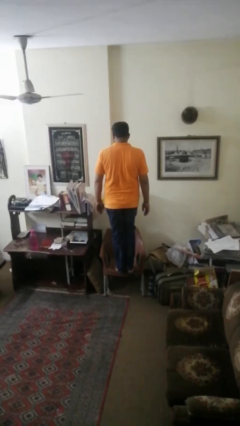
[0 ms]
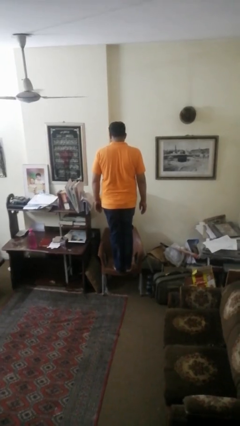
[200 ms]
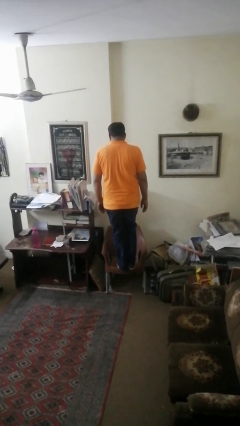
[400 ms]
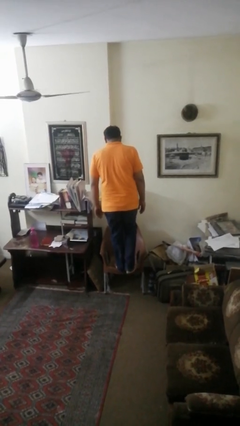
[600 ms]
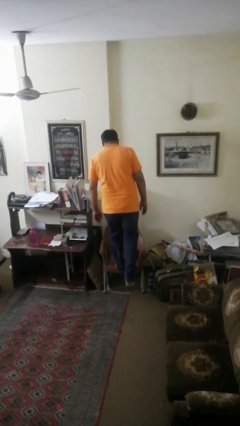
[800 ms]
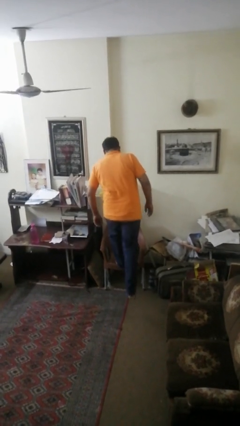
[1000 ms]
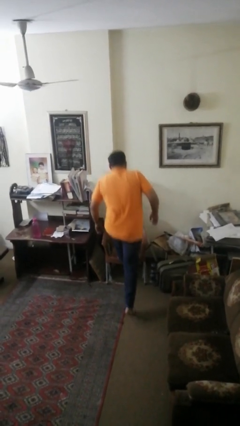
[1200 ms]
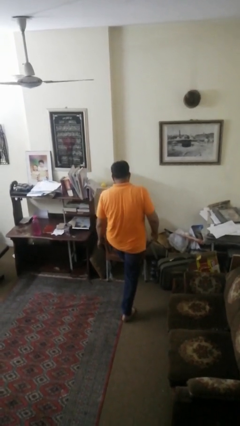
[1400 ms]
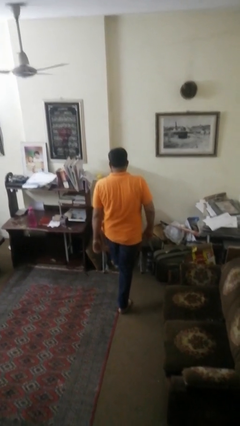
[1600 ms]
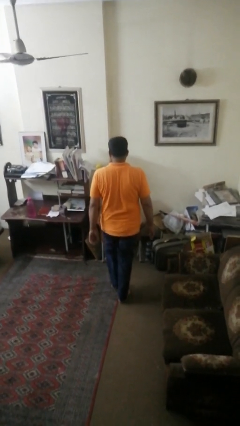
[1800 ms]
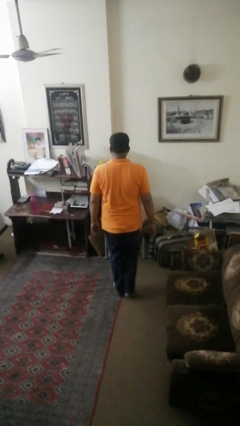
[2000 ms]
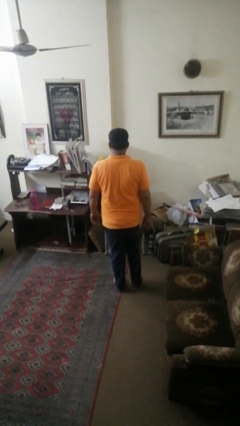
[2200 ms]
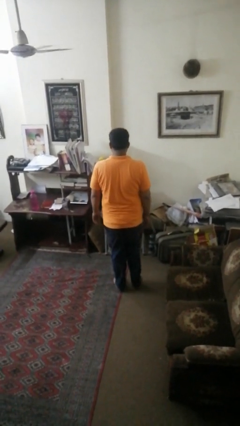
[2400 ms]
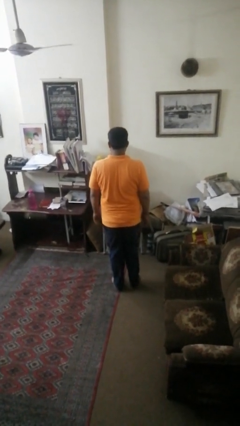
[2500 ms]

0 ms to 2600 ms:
person climbs off chair

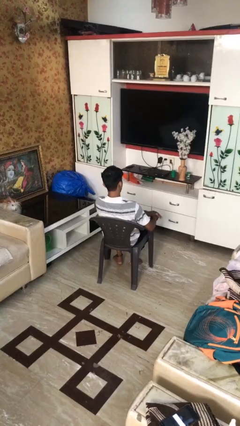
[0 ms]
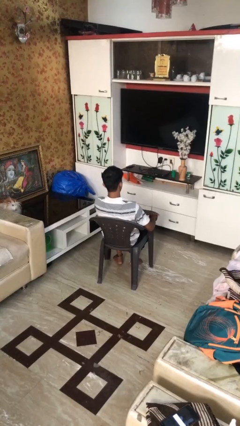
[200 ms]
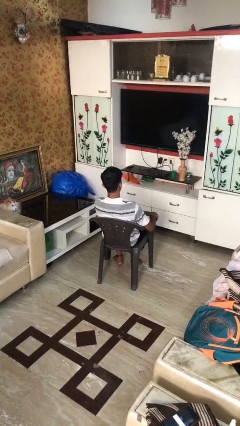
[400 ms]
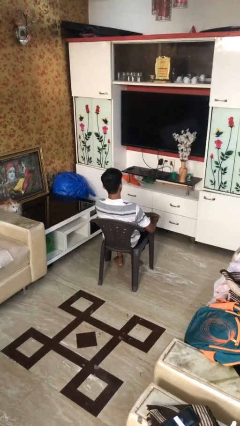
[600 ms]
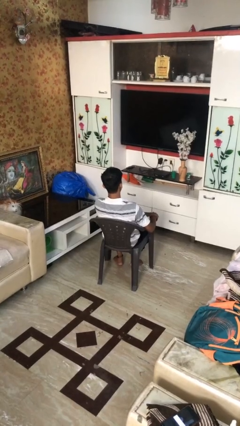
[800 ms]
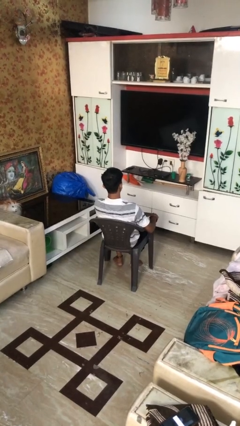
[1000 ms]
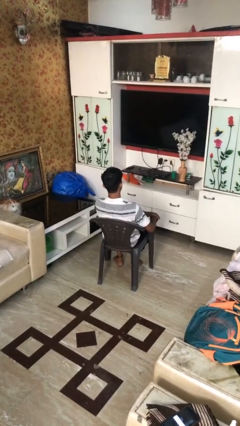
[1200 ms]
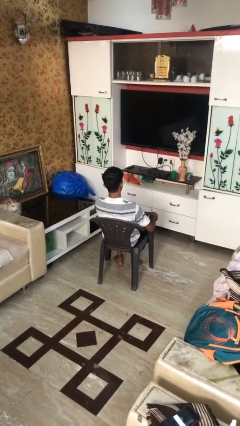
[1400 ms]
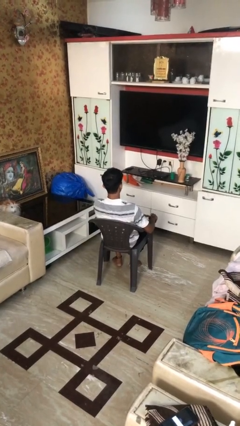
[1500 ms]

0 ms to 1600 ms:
person swats bug

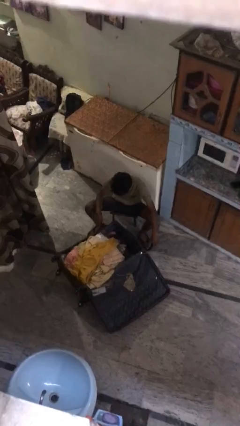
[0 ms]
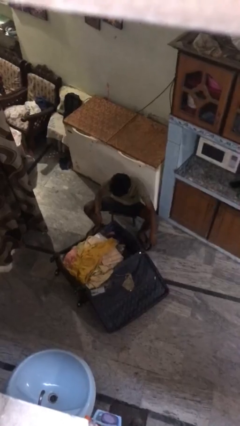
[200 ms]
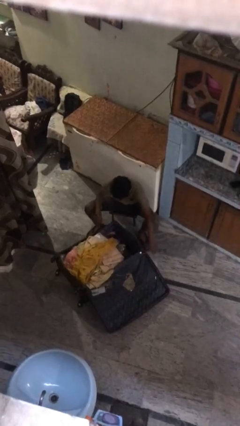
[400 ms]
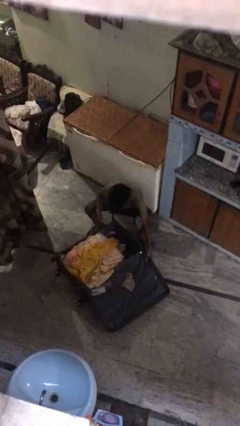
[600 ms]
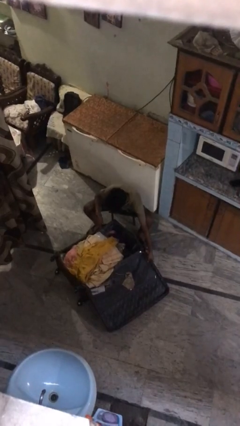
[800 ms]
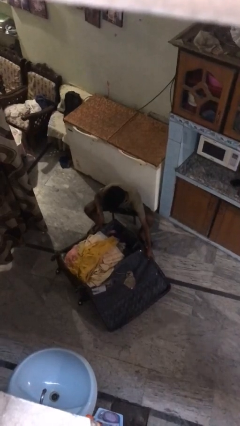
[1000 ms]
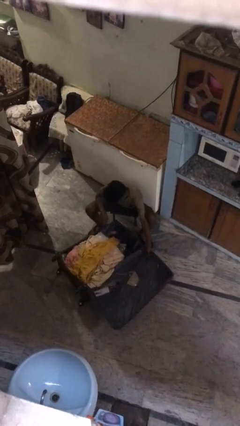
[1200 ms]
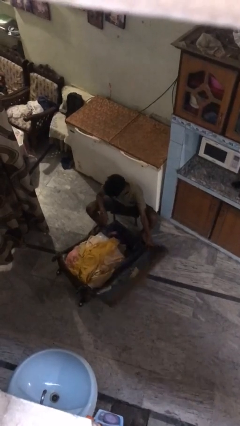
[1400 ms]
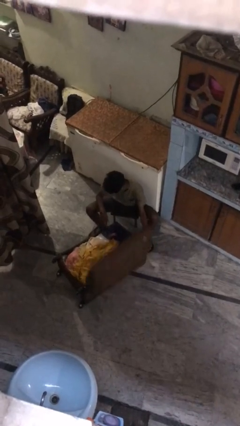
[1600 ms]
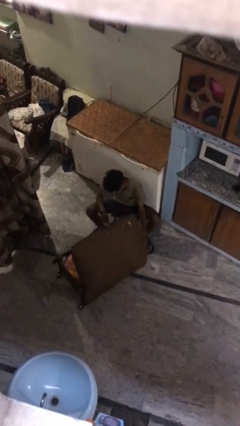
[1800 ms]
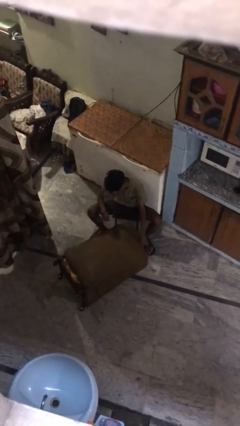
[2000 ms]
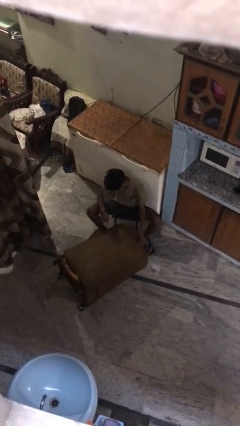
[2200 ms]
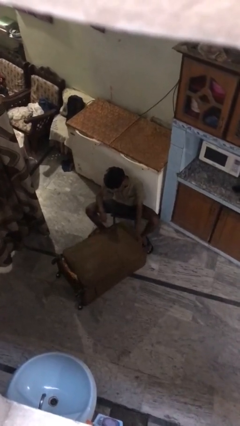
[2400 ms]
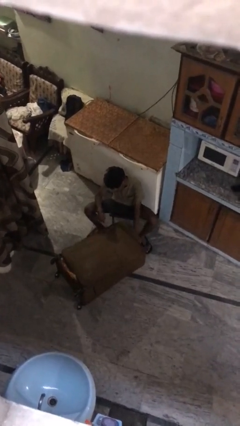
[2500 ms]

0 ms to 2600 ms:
person closes suitcase

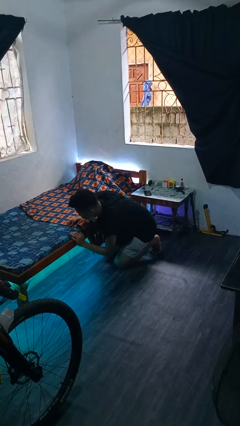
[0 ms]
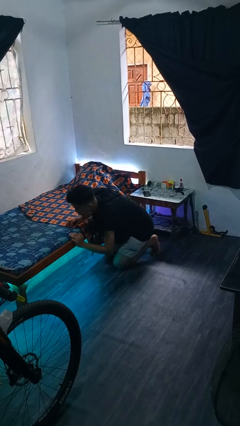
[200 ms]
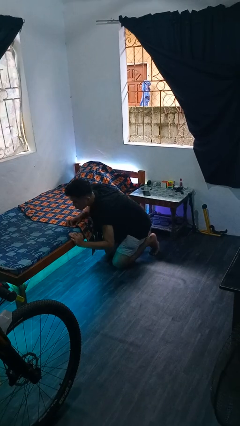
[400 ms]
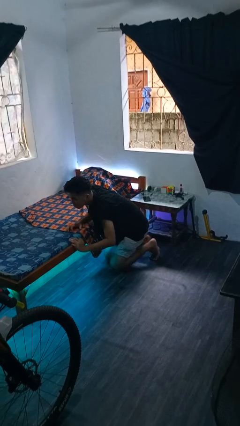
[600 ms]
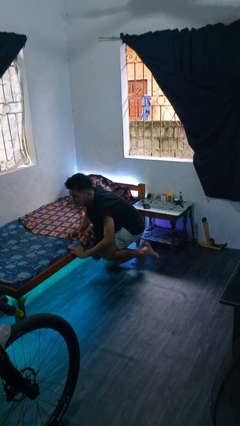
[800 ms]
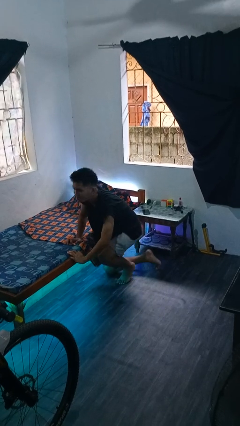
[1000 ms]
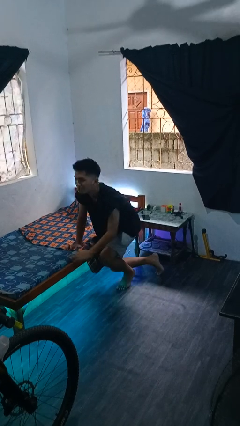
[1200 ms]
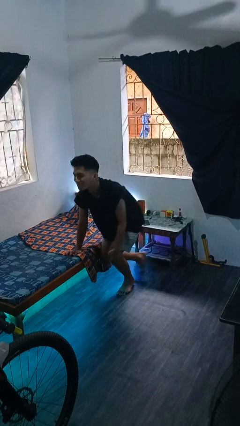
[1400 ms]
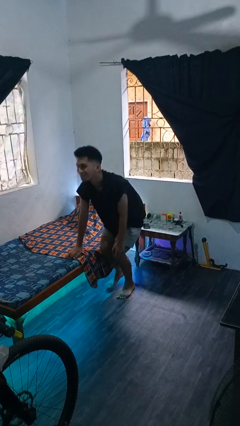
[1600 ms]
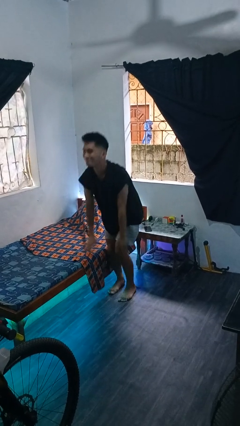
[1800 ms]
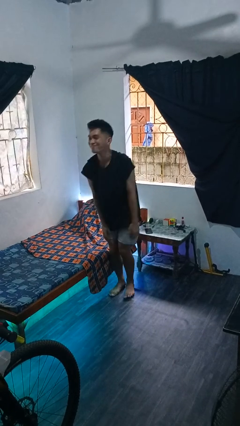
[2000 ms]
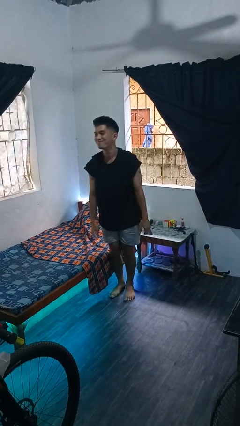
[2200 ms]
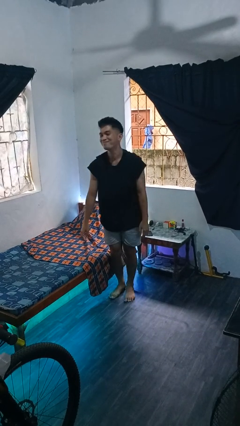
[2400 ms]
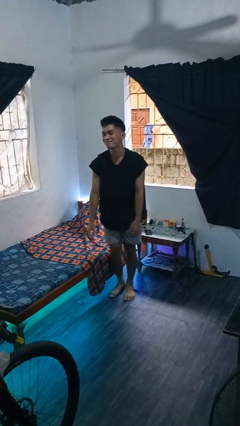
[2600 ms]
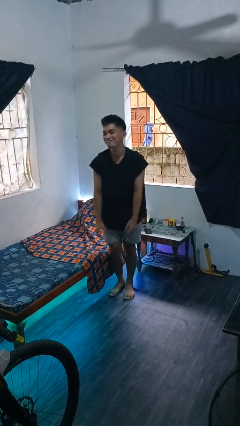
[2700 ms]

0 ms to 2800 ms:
person stands up from floor

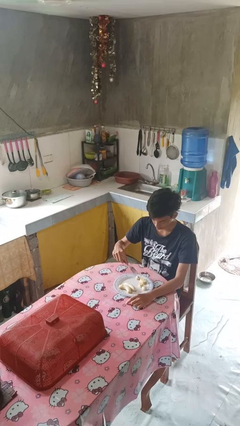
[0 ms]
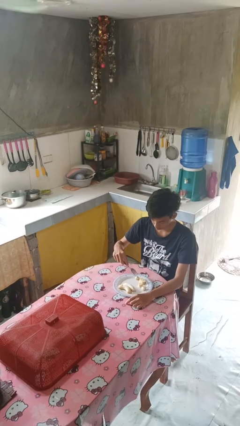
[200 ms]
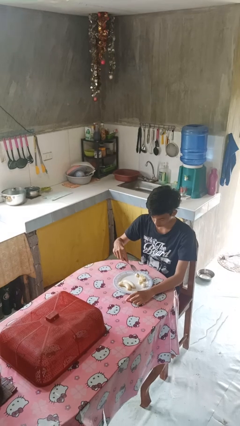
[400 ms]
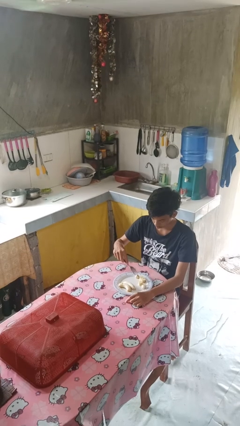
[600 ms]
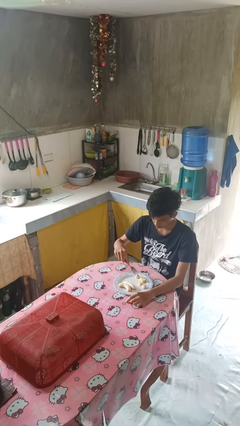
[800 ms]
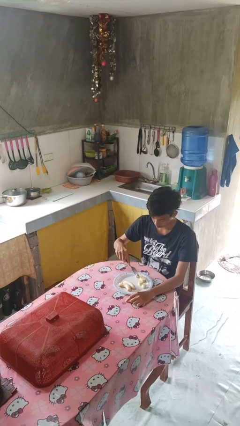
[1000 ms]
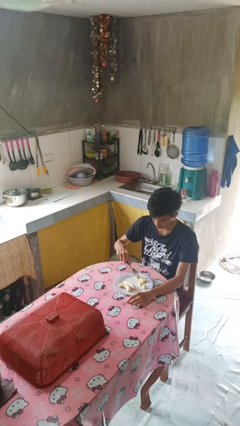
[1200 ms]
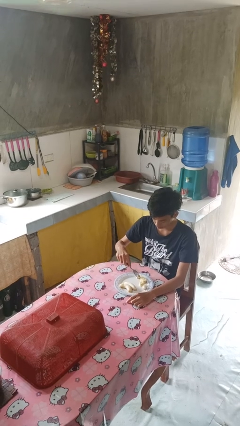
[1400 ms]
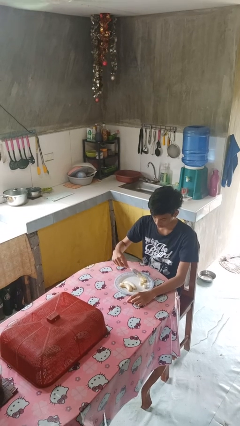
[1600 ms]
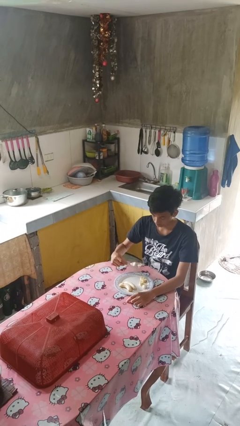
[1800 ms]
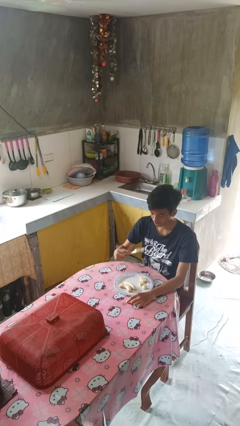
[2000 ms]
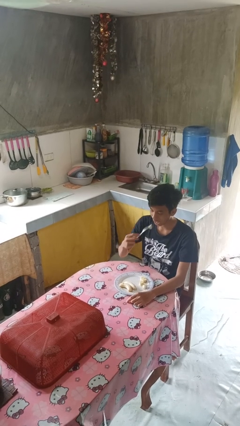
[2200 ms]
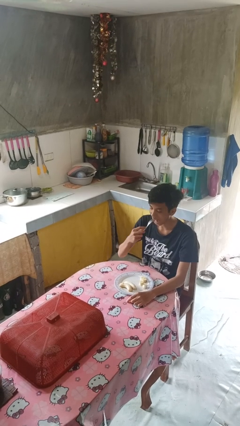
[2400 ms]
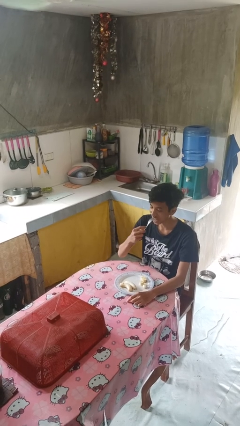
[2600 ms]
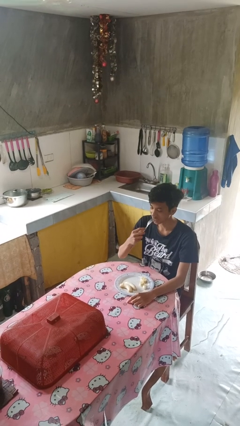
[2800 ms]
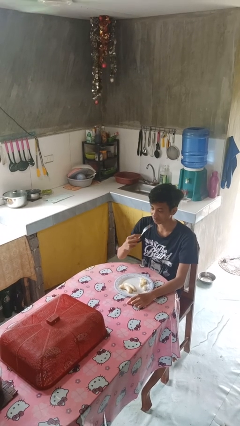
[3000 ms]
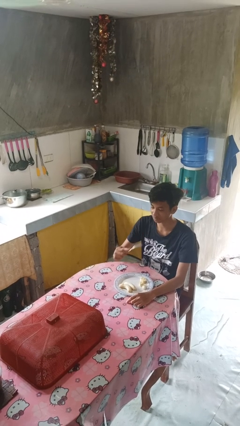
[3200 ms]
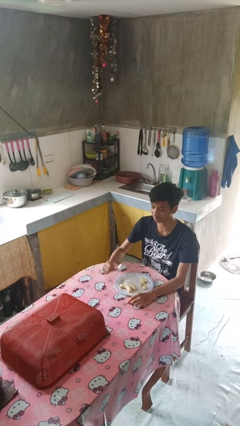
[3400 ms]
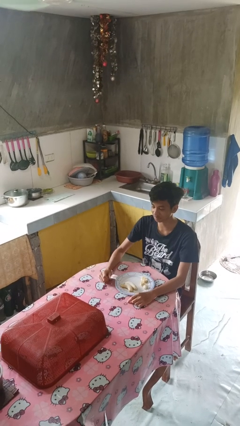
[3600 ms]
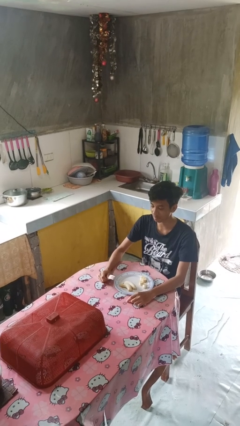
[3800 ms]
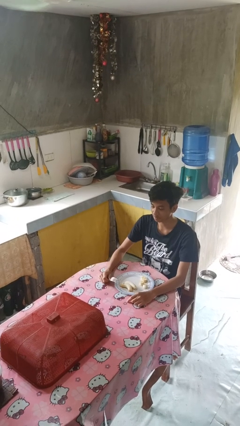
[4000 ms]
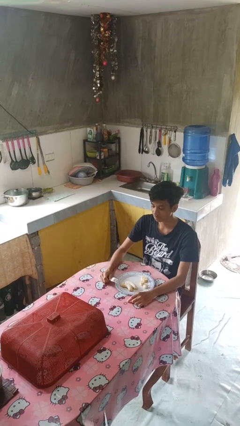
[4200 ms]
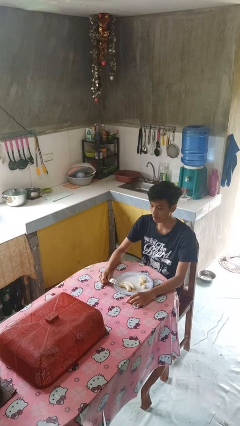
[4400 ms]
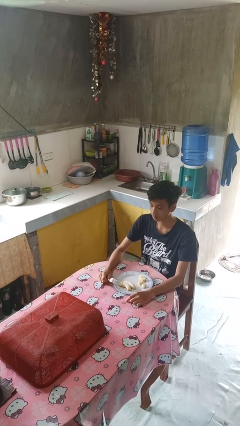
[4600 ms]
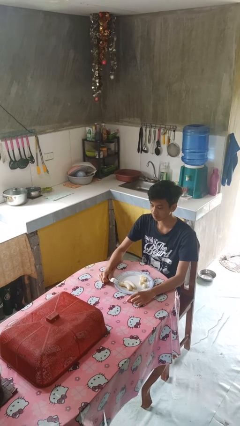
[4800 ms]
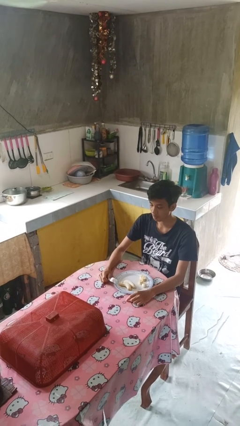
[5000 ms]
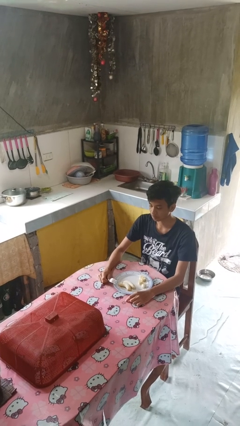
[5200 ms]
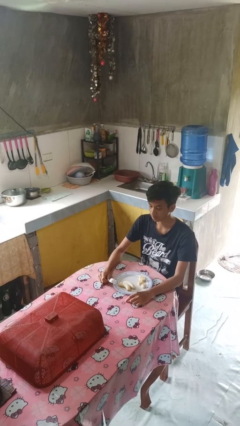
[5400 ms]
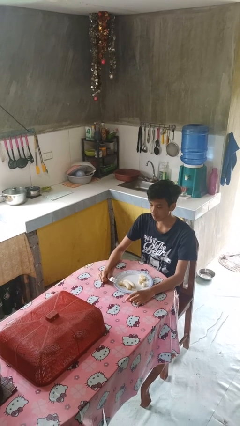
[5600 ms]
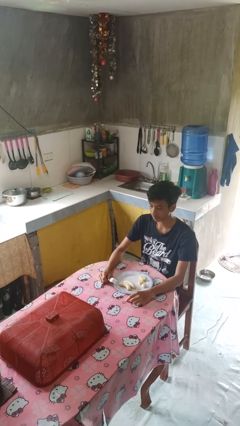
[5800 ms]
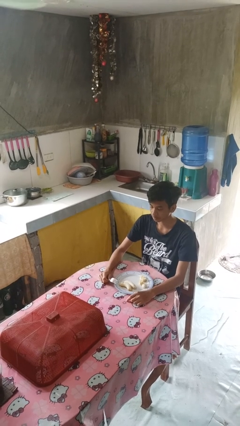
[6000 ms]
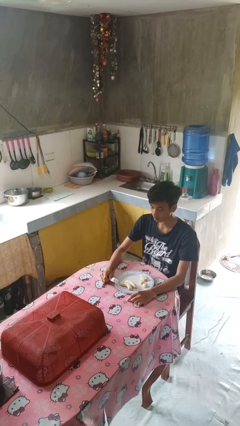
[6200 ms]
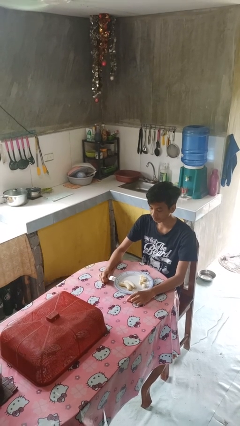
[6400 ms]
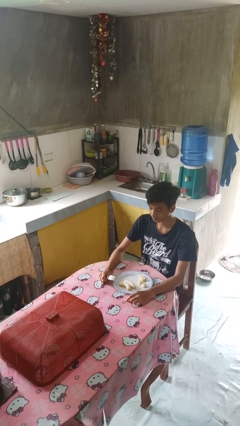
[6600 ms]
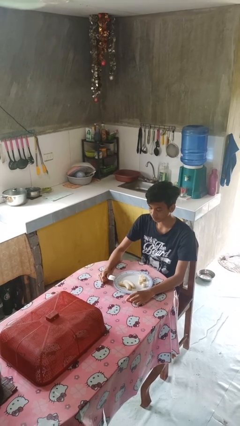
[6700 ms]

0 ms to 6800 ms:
person eats with utensil

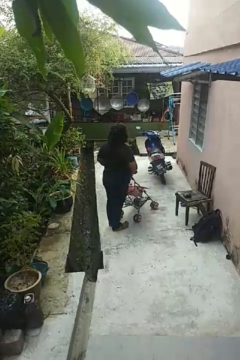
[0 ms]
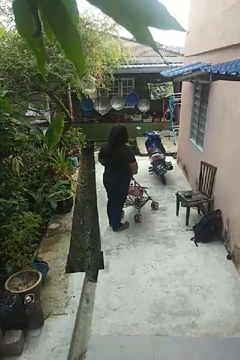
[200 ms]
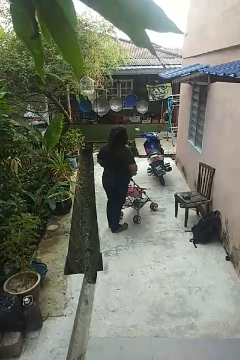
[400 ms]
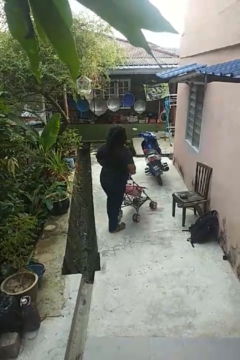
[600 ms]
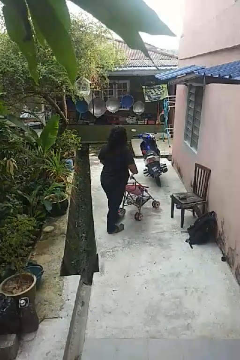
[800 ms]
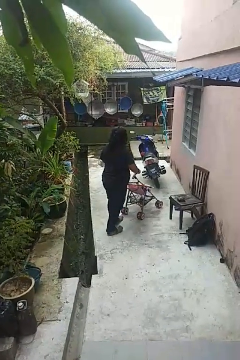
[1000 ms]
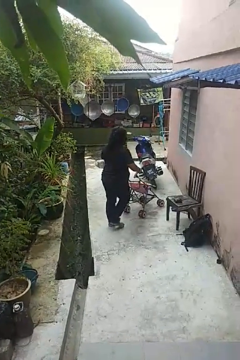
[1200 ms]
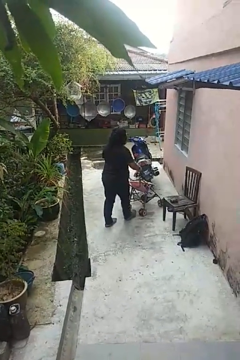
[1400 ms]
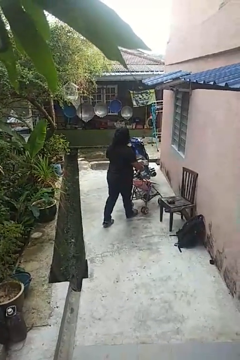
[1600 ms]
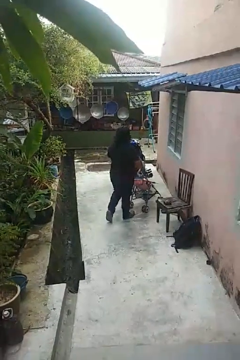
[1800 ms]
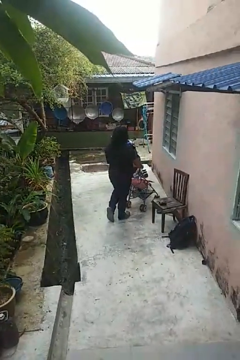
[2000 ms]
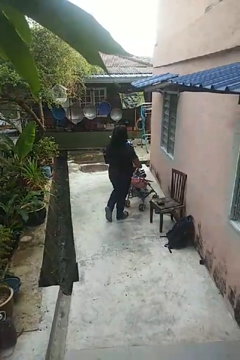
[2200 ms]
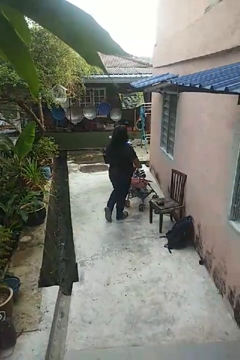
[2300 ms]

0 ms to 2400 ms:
person pushes wheeled cart
